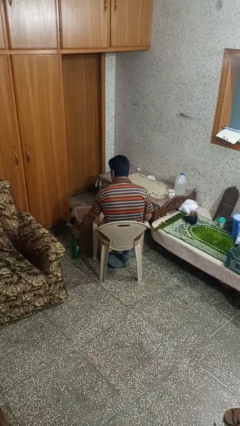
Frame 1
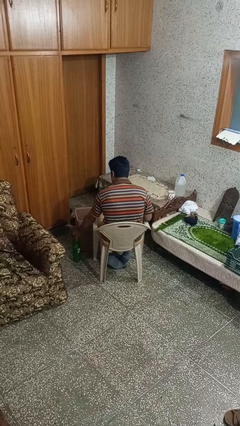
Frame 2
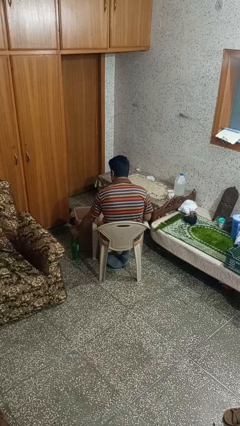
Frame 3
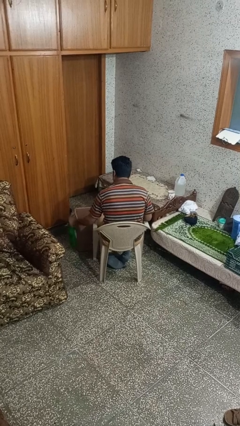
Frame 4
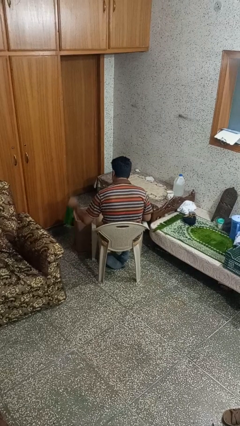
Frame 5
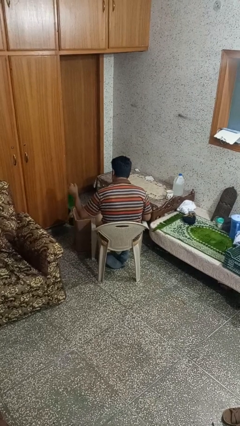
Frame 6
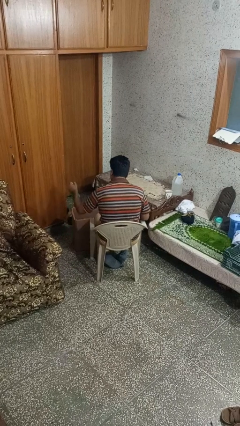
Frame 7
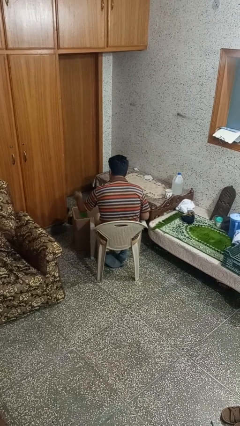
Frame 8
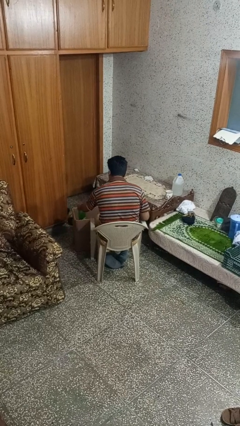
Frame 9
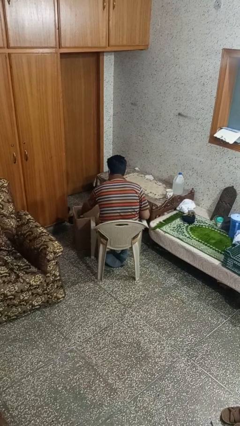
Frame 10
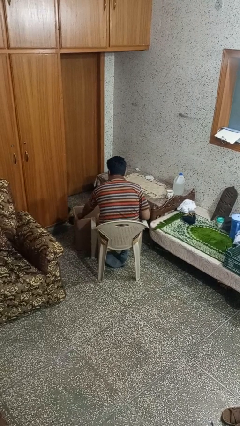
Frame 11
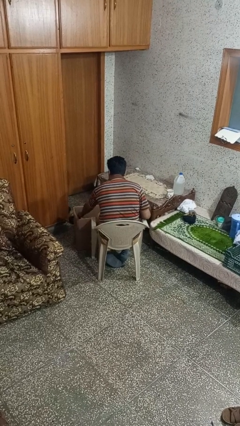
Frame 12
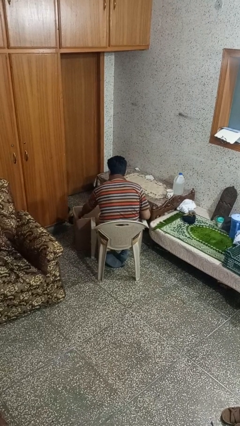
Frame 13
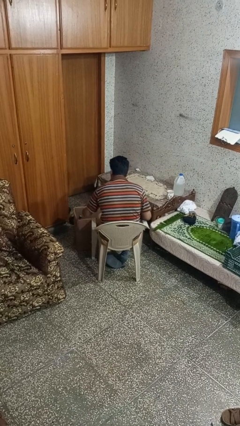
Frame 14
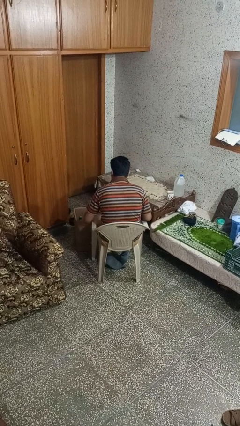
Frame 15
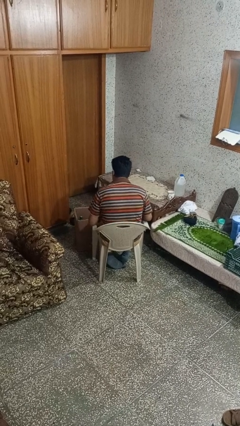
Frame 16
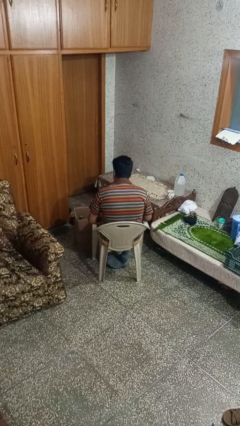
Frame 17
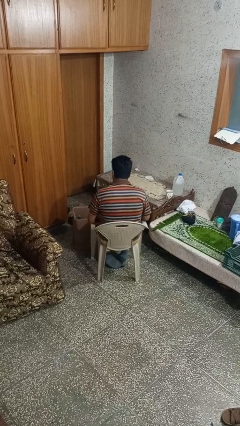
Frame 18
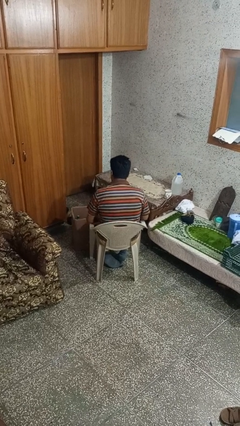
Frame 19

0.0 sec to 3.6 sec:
person puts object into box

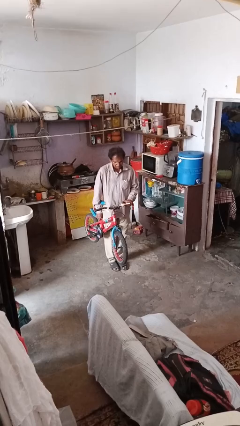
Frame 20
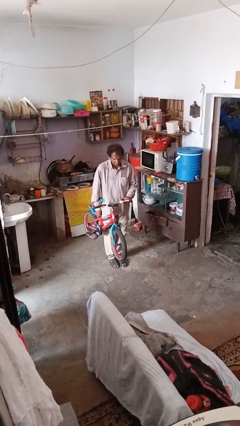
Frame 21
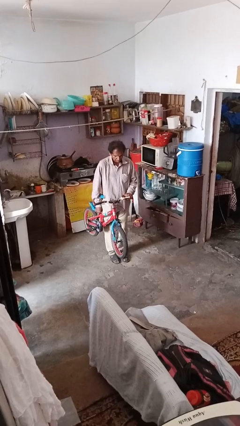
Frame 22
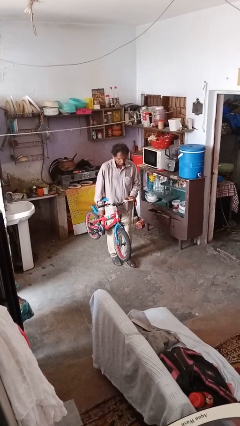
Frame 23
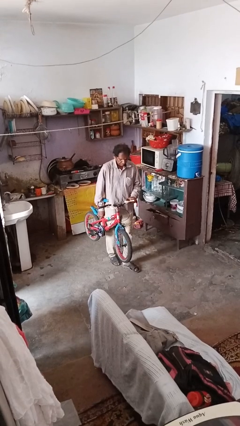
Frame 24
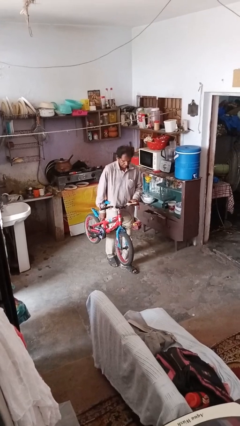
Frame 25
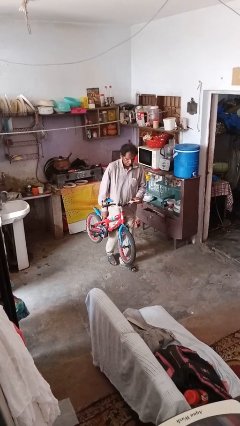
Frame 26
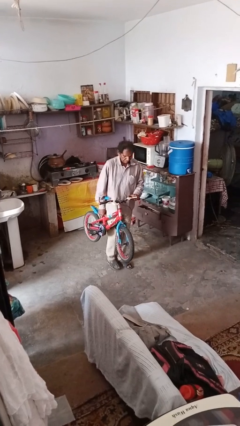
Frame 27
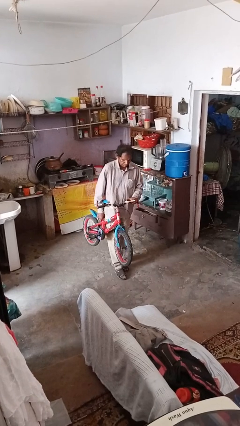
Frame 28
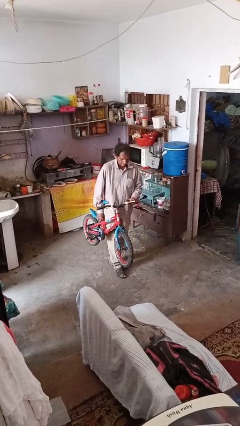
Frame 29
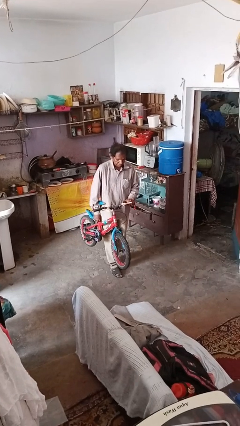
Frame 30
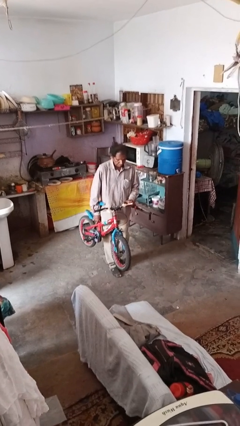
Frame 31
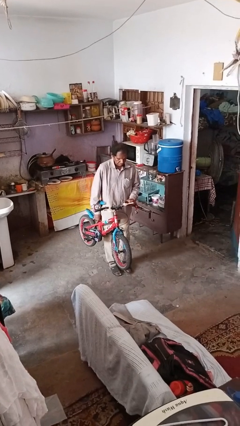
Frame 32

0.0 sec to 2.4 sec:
person carries bicycle

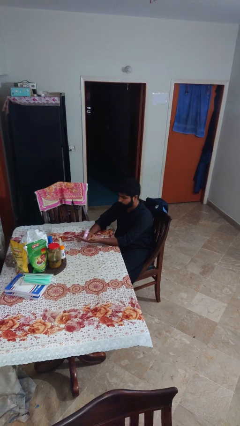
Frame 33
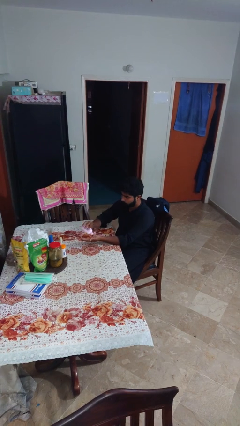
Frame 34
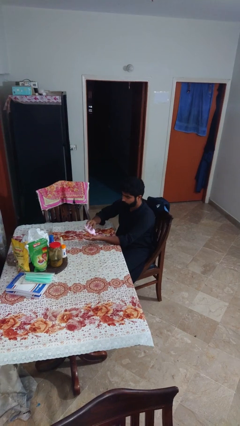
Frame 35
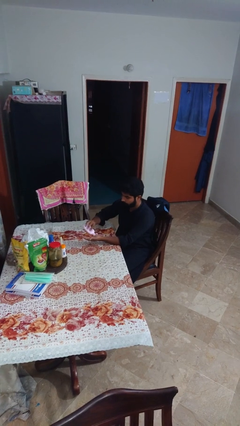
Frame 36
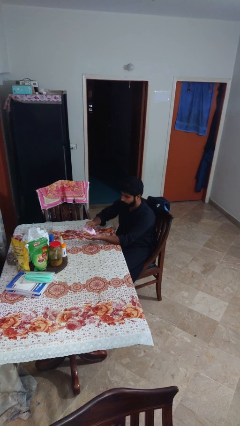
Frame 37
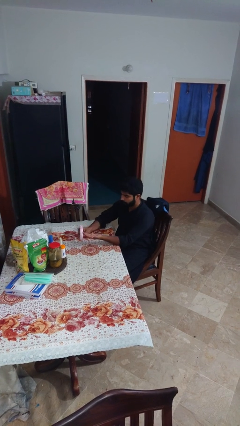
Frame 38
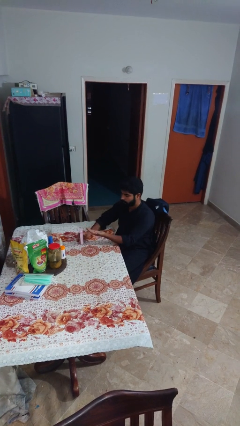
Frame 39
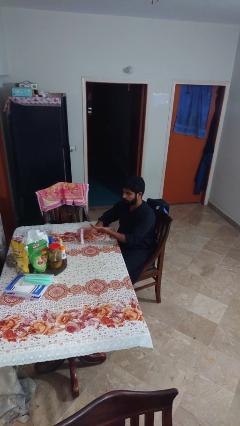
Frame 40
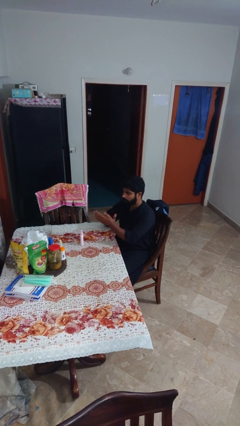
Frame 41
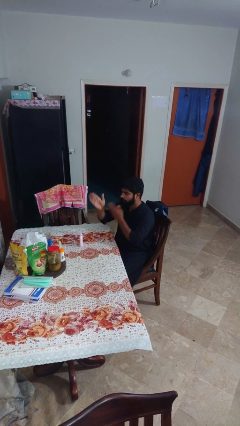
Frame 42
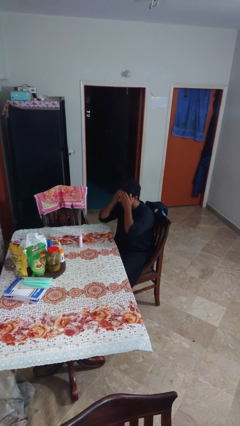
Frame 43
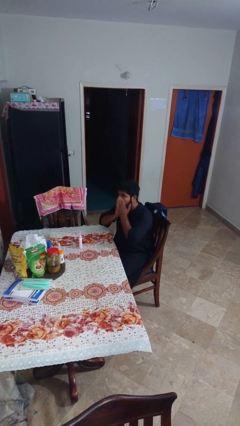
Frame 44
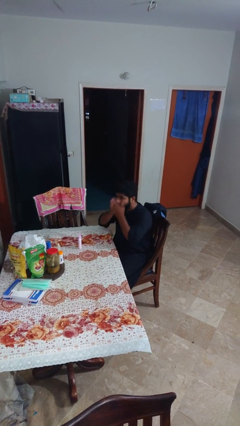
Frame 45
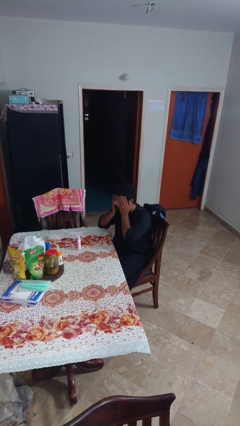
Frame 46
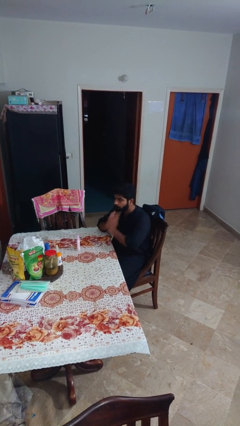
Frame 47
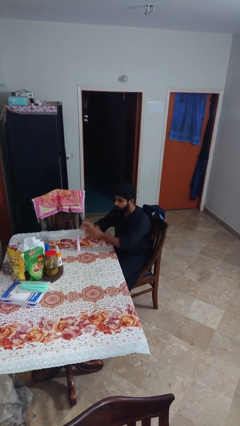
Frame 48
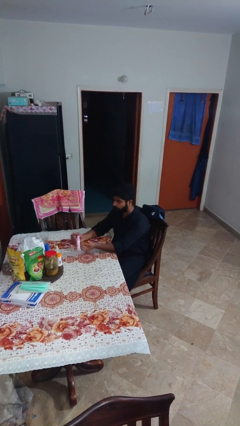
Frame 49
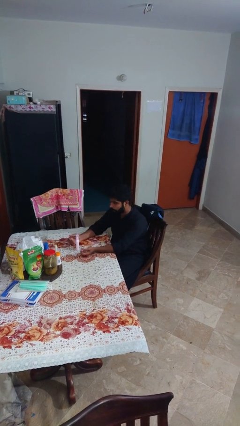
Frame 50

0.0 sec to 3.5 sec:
person applies facial moisturizer

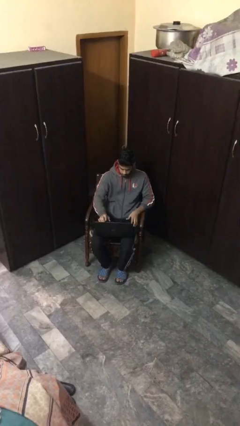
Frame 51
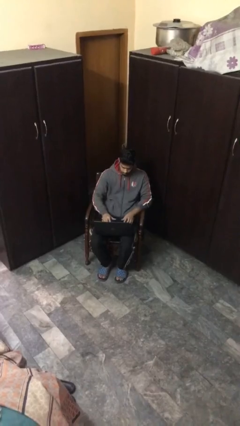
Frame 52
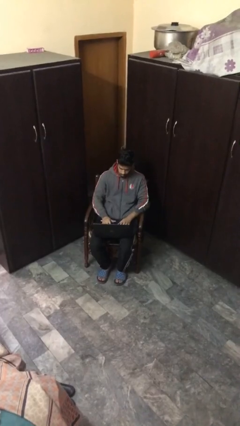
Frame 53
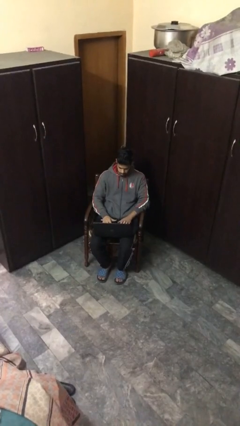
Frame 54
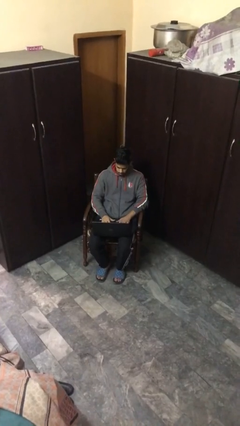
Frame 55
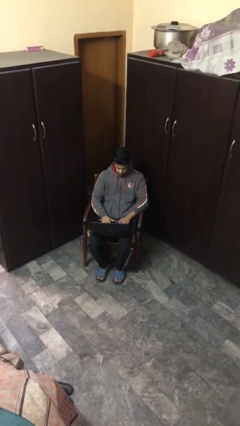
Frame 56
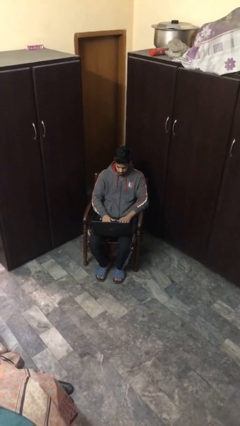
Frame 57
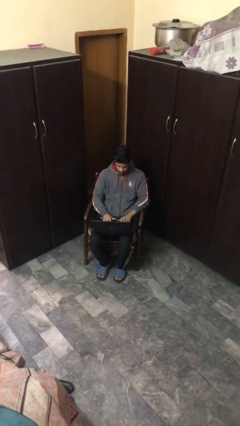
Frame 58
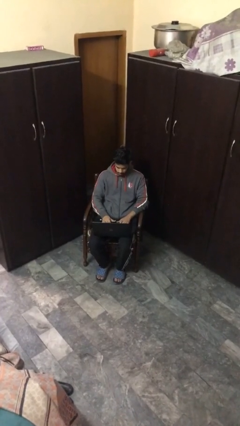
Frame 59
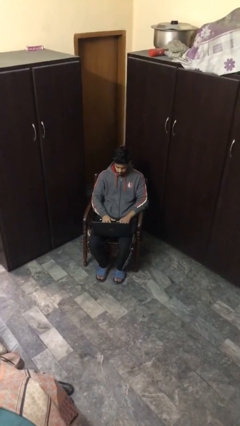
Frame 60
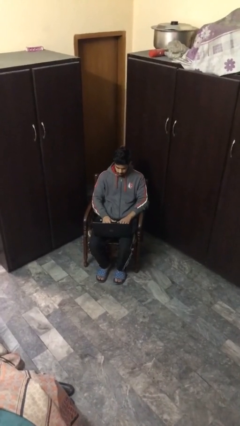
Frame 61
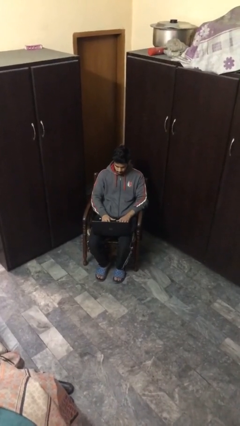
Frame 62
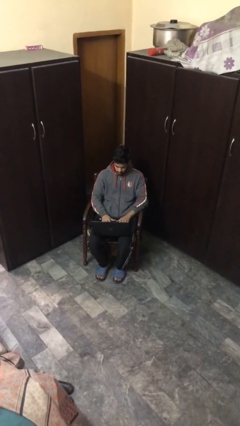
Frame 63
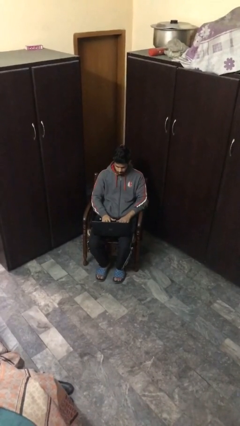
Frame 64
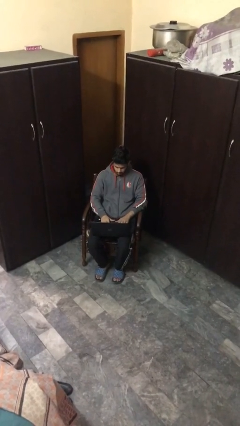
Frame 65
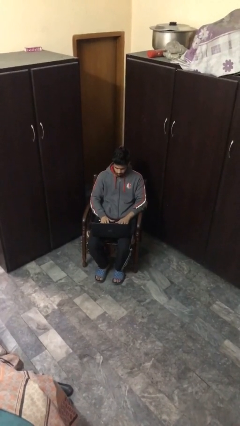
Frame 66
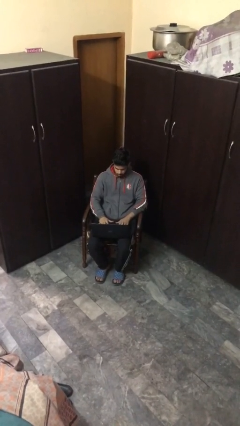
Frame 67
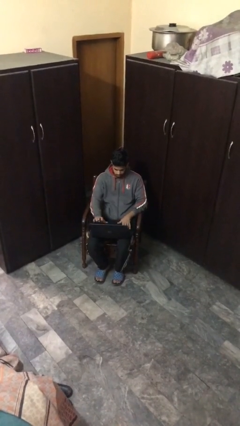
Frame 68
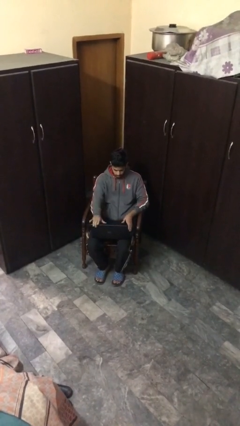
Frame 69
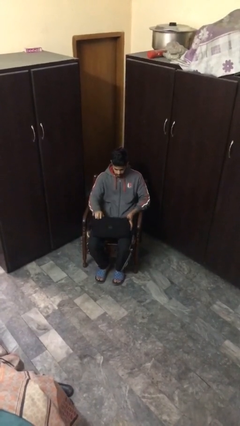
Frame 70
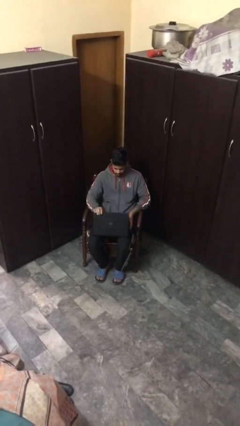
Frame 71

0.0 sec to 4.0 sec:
person interacts with laptop

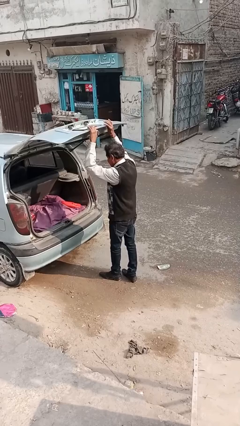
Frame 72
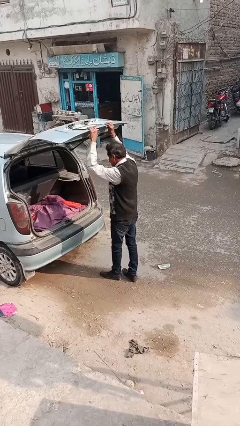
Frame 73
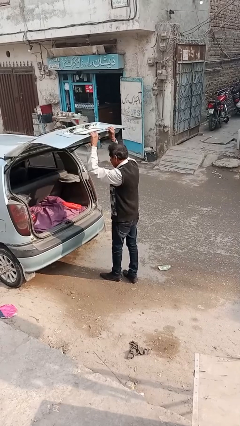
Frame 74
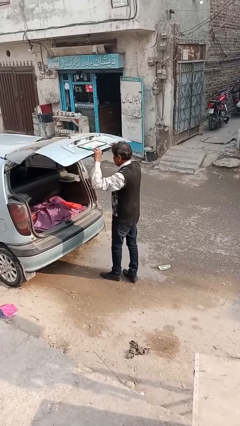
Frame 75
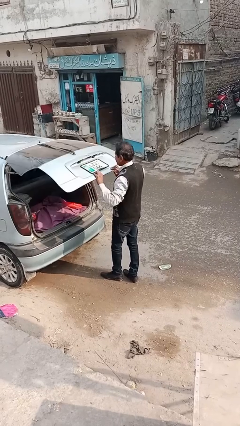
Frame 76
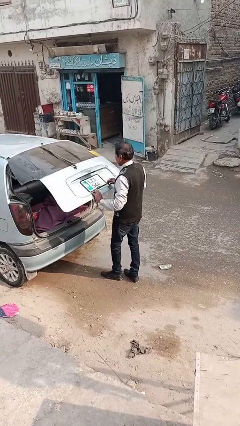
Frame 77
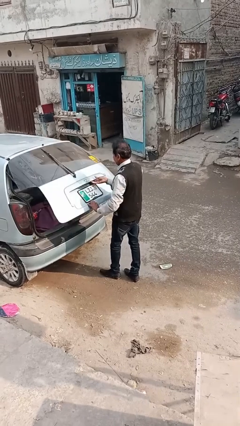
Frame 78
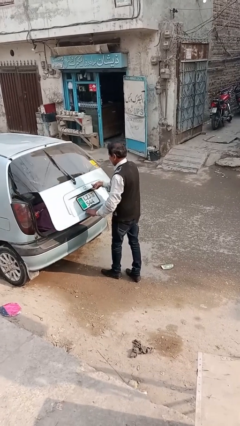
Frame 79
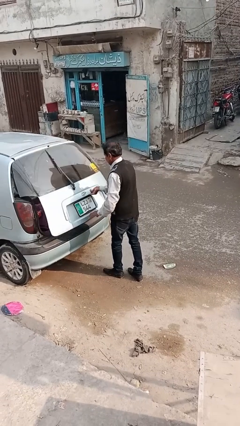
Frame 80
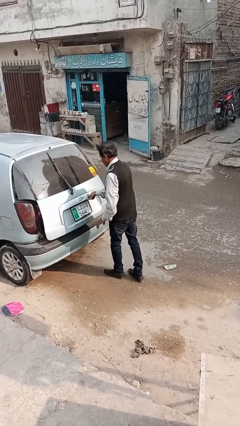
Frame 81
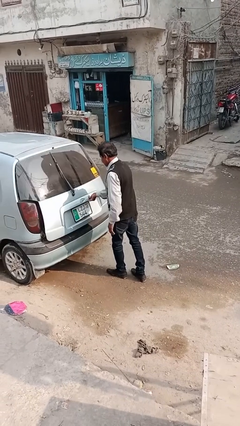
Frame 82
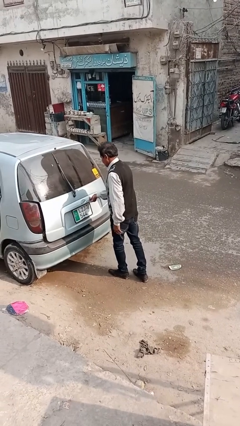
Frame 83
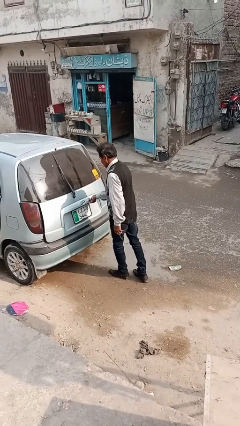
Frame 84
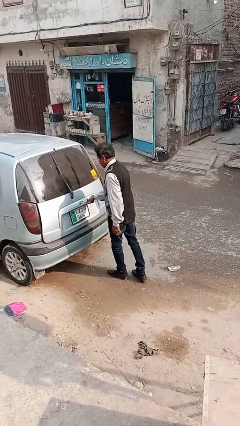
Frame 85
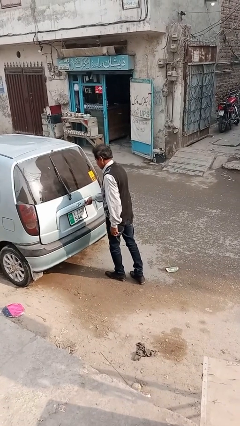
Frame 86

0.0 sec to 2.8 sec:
person closes car trunk

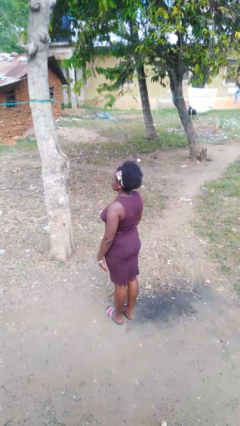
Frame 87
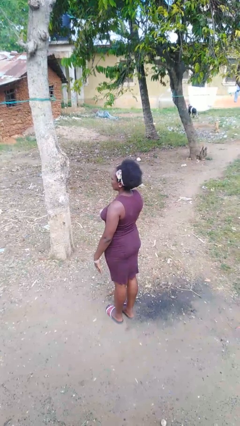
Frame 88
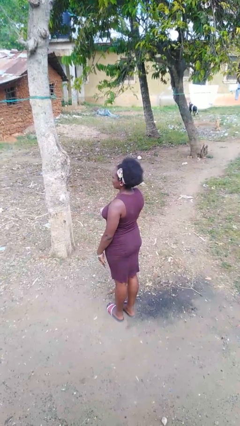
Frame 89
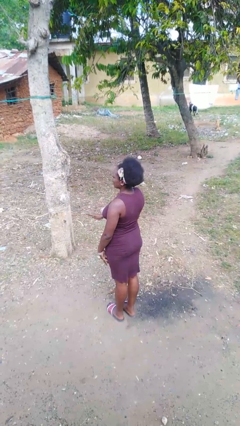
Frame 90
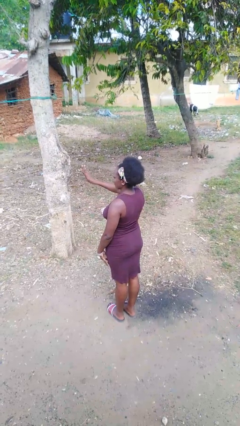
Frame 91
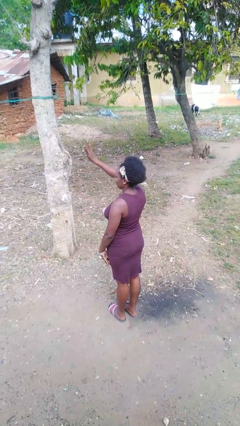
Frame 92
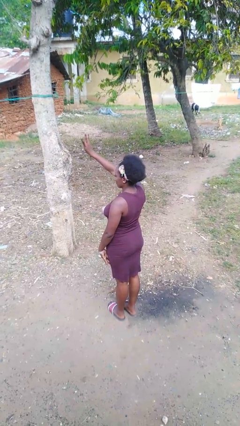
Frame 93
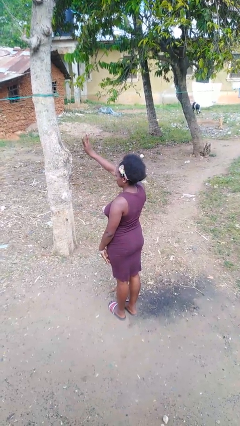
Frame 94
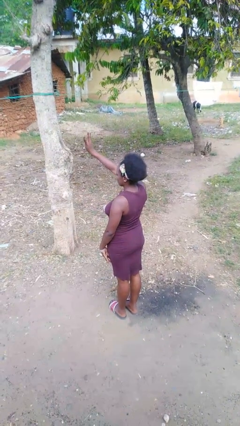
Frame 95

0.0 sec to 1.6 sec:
person gestures number four
